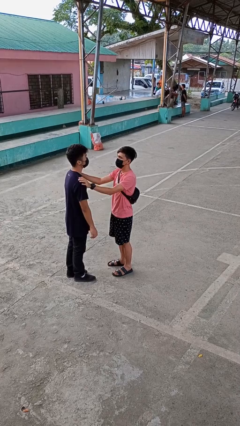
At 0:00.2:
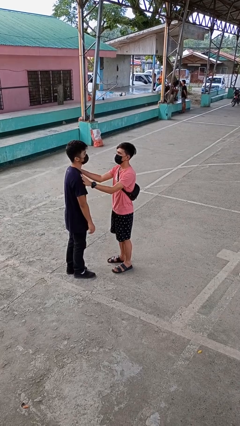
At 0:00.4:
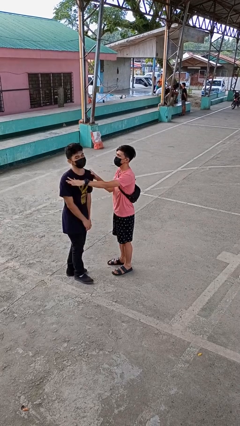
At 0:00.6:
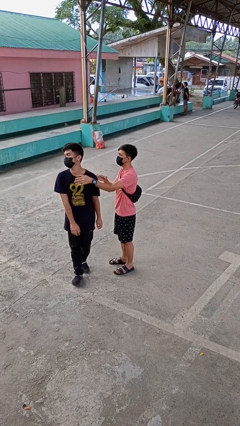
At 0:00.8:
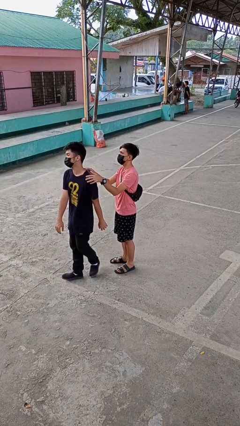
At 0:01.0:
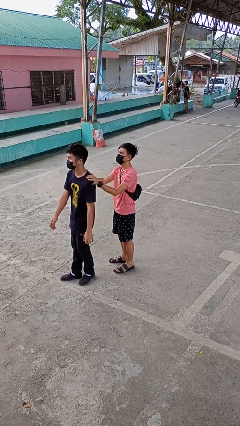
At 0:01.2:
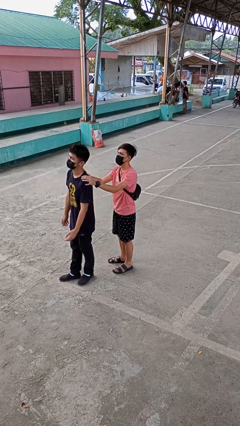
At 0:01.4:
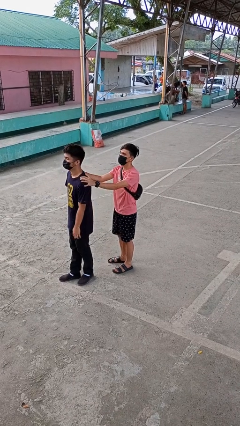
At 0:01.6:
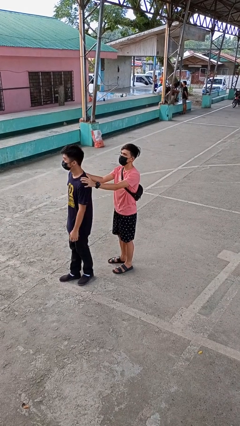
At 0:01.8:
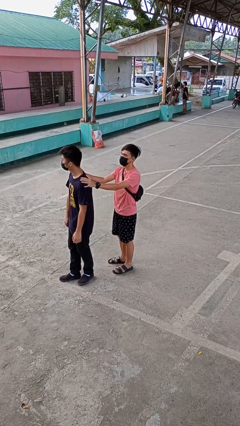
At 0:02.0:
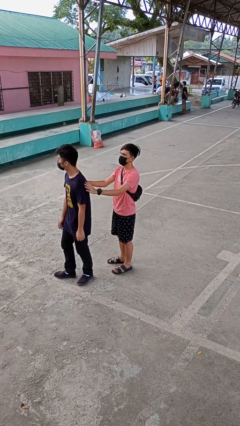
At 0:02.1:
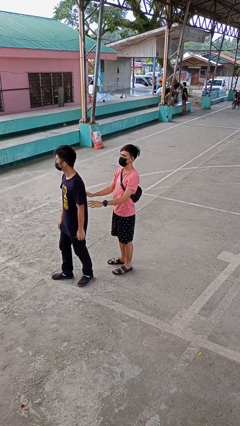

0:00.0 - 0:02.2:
person spins person around

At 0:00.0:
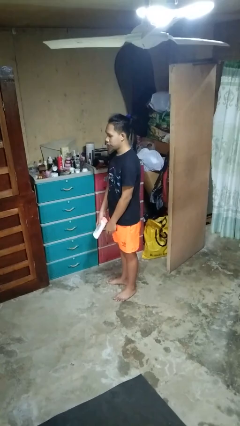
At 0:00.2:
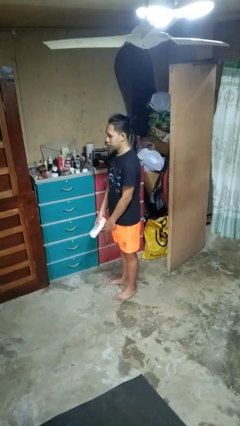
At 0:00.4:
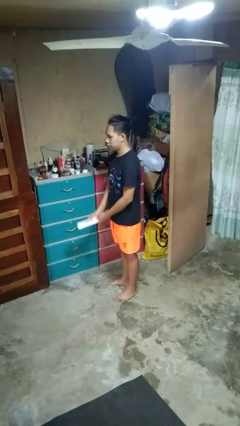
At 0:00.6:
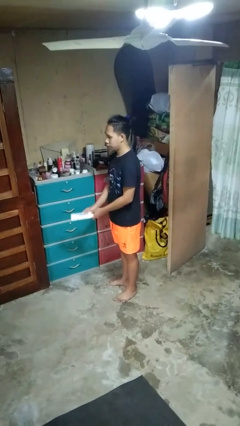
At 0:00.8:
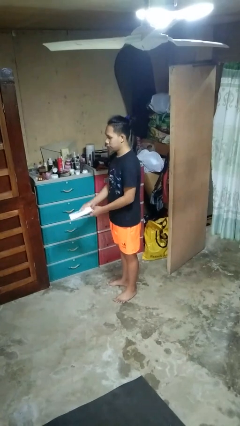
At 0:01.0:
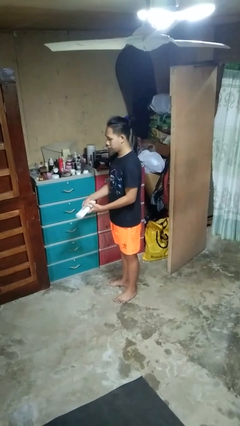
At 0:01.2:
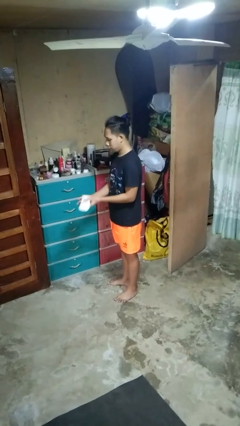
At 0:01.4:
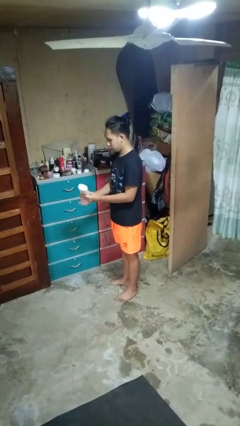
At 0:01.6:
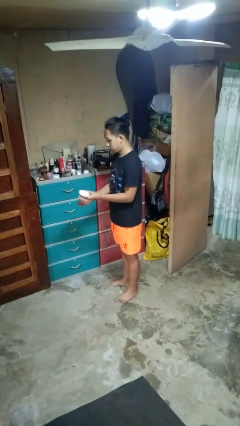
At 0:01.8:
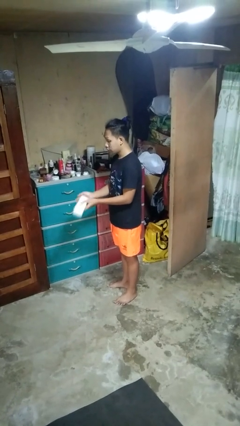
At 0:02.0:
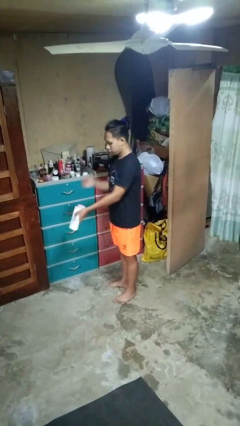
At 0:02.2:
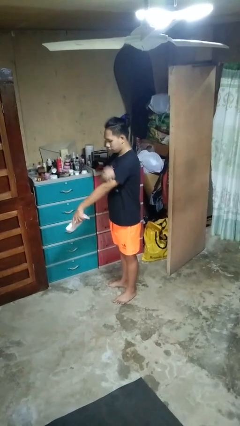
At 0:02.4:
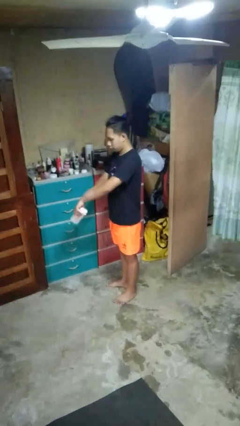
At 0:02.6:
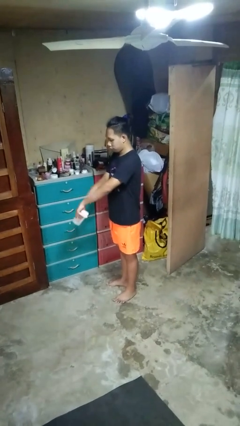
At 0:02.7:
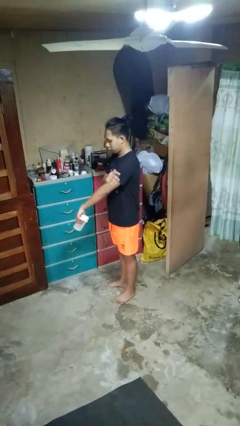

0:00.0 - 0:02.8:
person applies sunscreen

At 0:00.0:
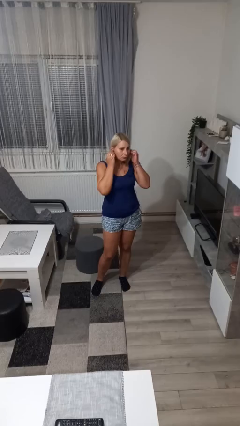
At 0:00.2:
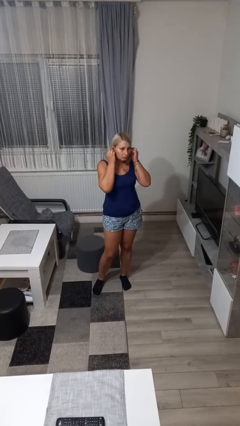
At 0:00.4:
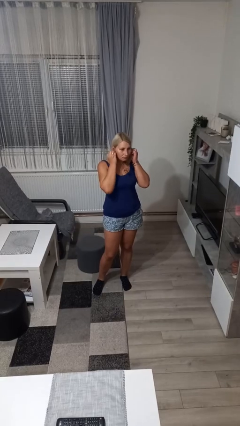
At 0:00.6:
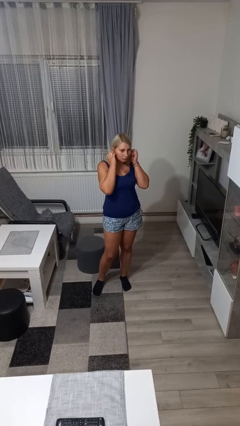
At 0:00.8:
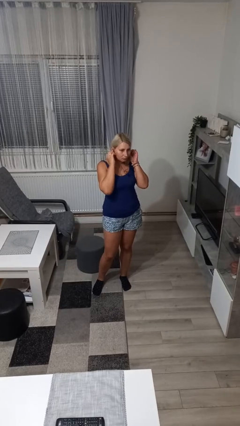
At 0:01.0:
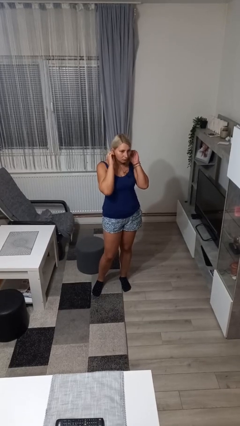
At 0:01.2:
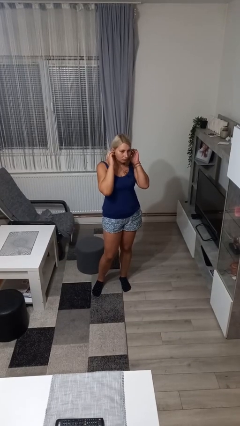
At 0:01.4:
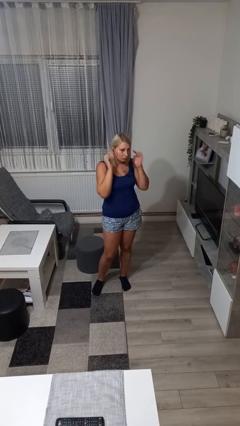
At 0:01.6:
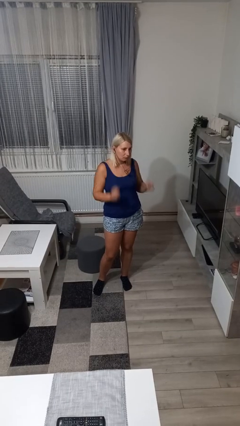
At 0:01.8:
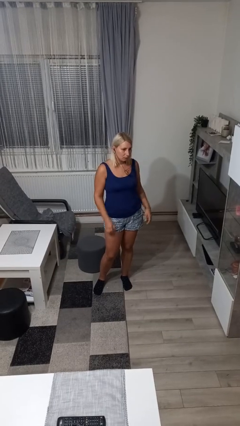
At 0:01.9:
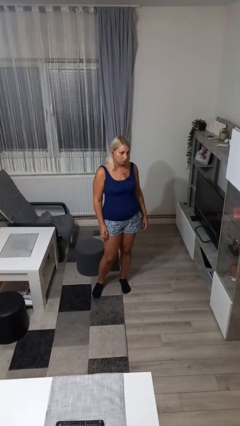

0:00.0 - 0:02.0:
person puts on headphones

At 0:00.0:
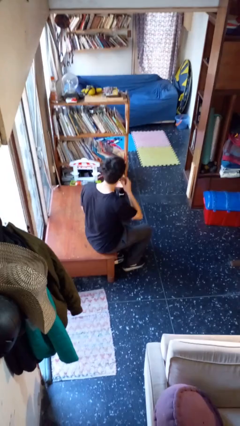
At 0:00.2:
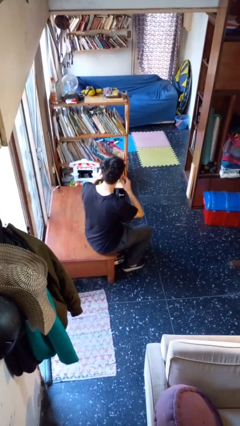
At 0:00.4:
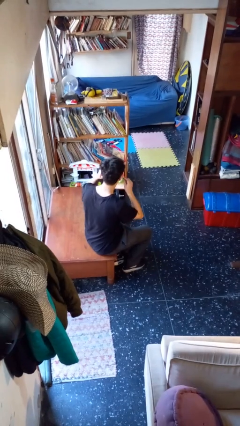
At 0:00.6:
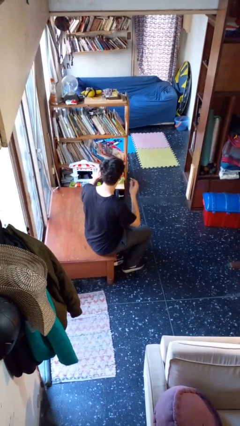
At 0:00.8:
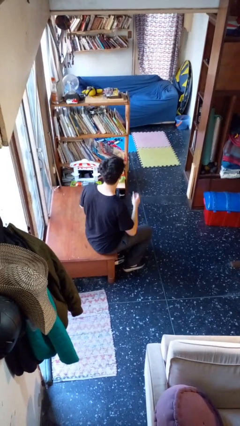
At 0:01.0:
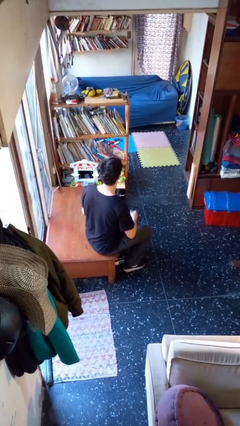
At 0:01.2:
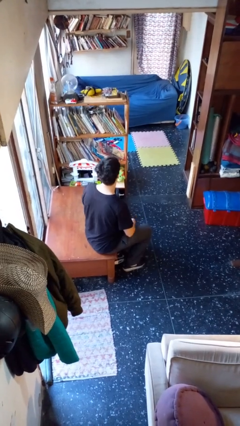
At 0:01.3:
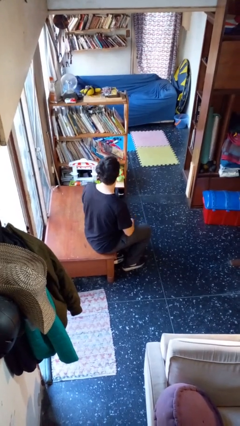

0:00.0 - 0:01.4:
person takes off headphones

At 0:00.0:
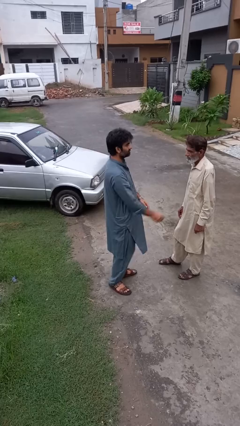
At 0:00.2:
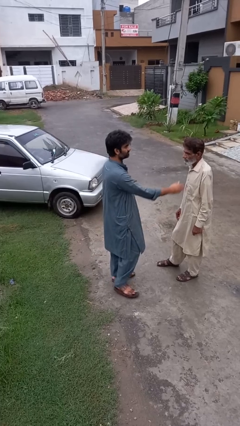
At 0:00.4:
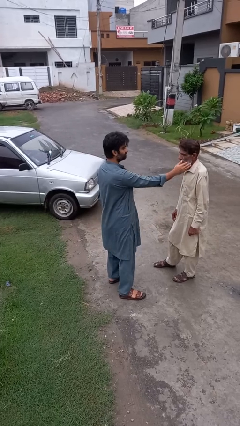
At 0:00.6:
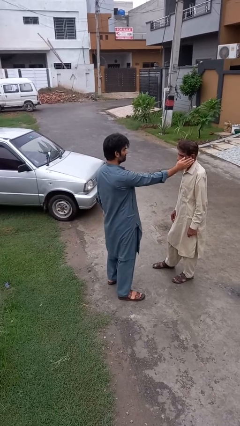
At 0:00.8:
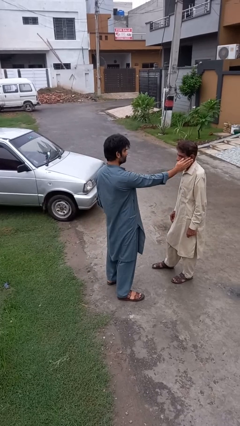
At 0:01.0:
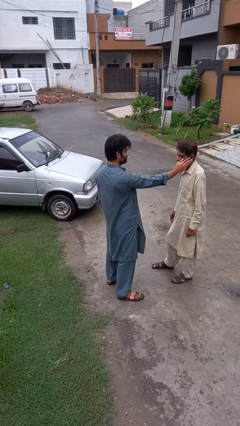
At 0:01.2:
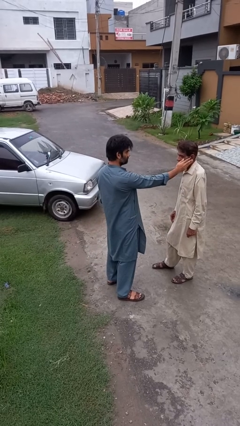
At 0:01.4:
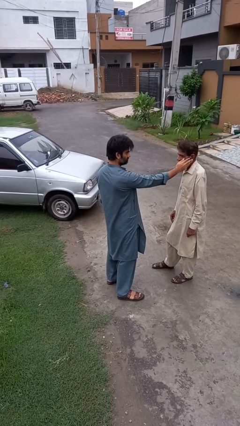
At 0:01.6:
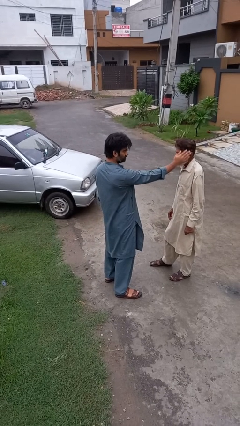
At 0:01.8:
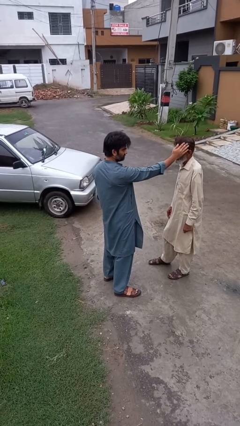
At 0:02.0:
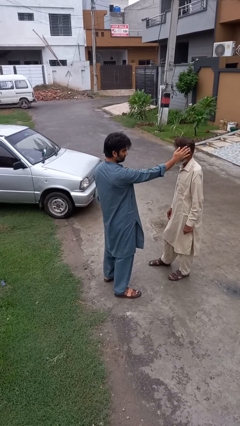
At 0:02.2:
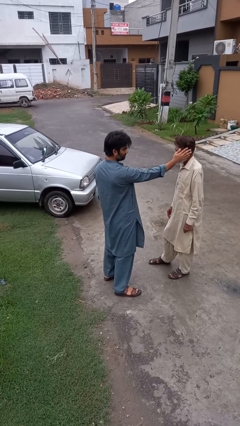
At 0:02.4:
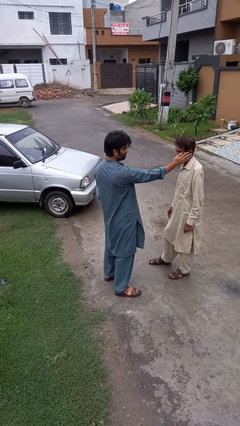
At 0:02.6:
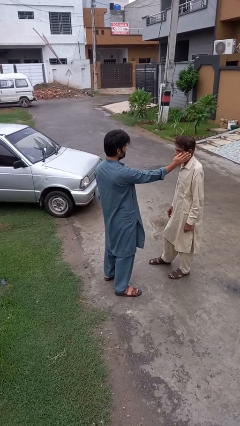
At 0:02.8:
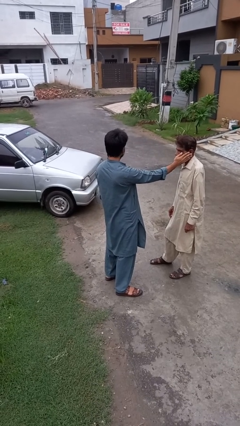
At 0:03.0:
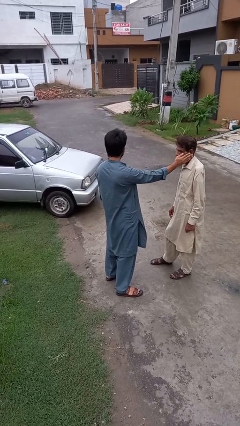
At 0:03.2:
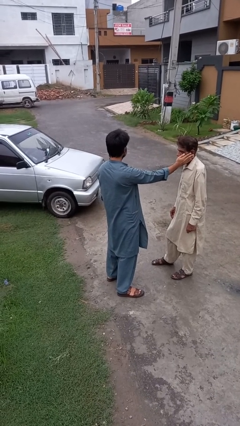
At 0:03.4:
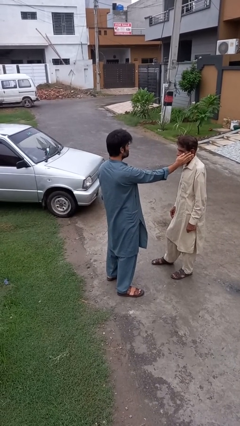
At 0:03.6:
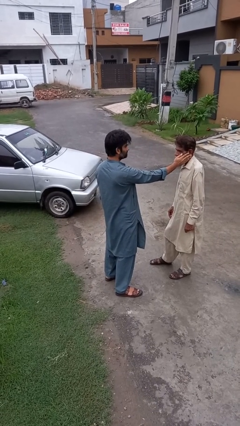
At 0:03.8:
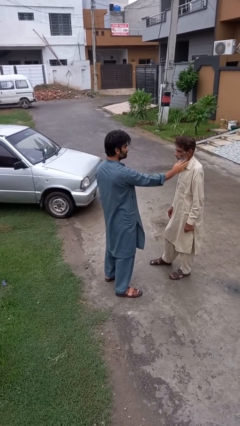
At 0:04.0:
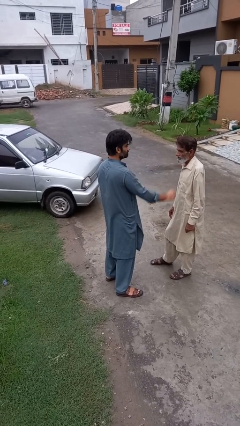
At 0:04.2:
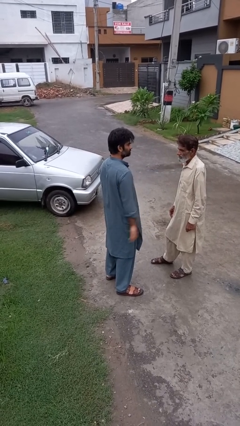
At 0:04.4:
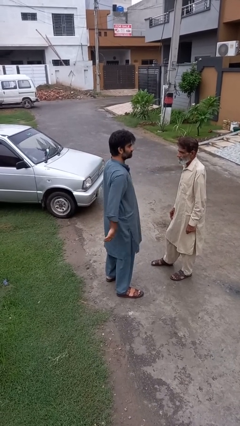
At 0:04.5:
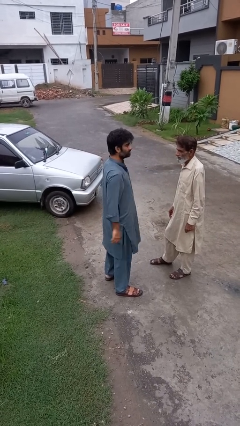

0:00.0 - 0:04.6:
person touches face of person

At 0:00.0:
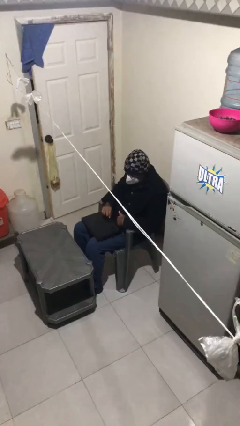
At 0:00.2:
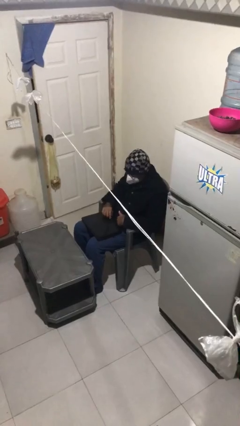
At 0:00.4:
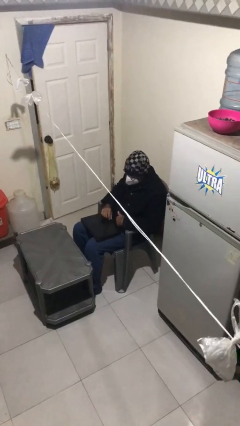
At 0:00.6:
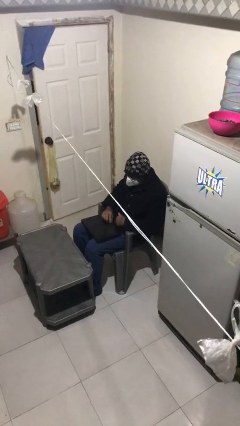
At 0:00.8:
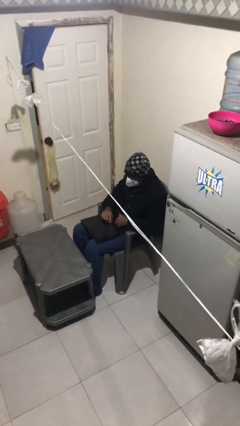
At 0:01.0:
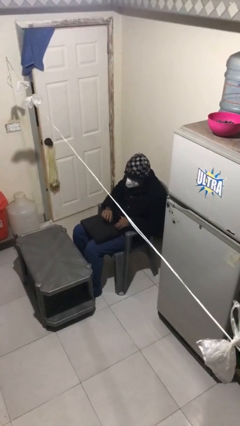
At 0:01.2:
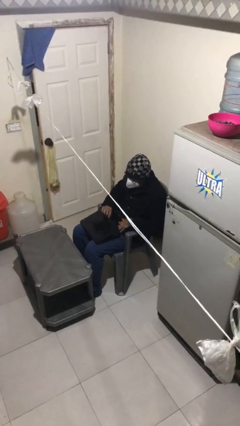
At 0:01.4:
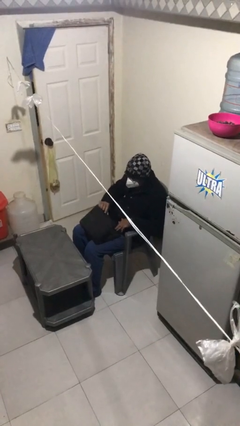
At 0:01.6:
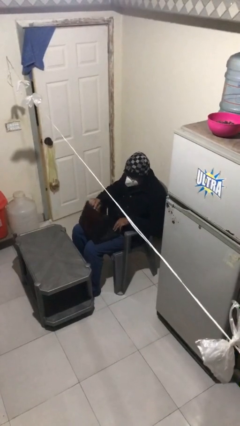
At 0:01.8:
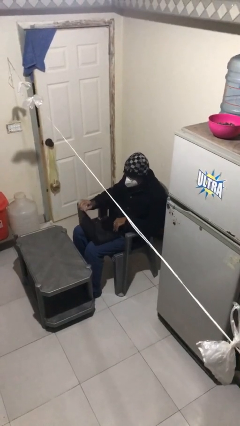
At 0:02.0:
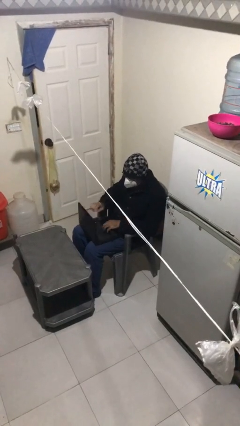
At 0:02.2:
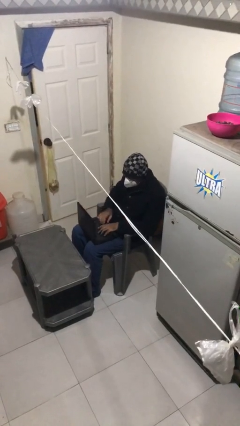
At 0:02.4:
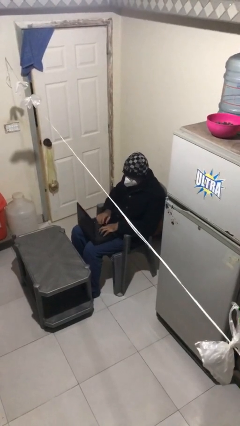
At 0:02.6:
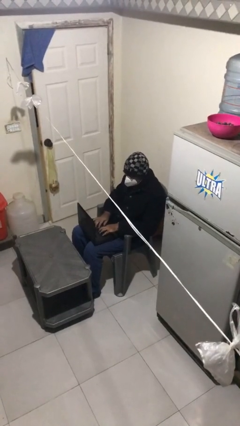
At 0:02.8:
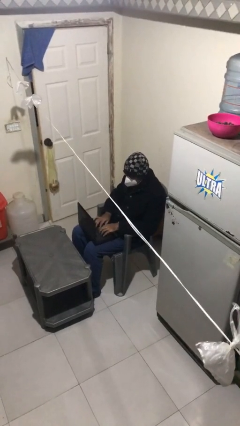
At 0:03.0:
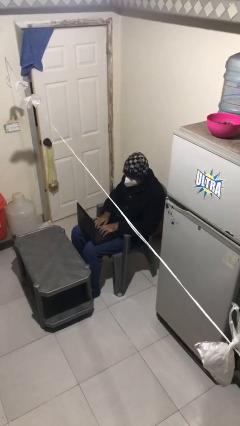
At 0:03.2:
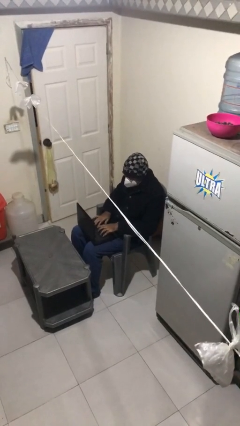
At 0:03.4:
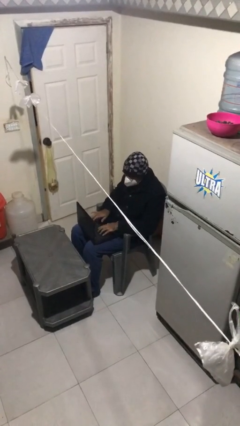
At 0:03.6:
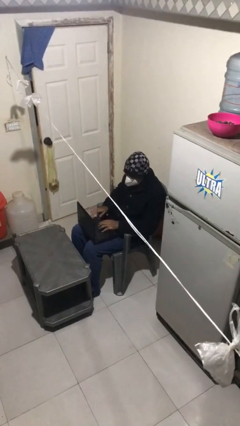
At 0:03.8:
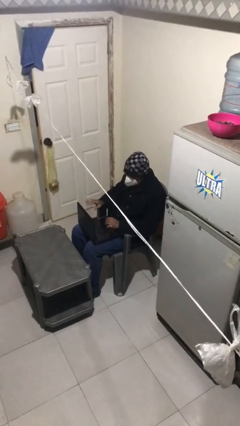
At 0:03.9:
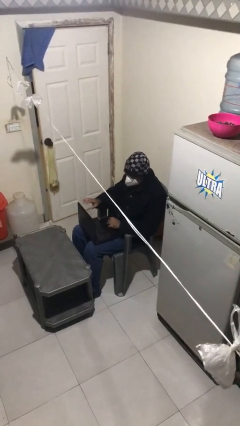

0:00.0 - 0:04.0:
person interacts with laptop
